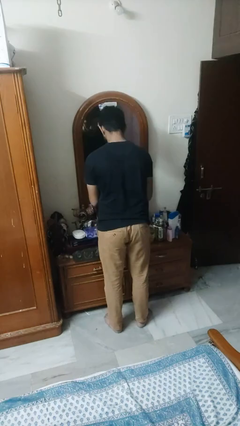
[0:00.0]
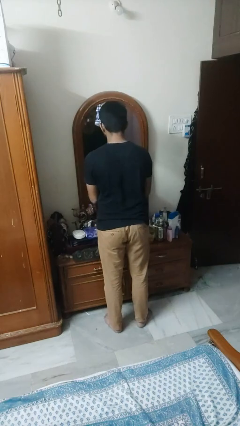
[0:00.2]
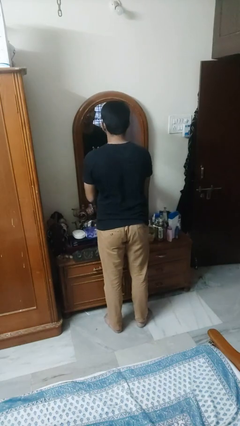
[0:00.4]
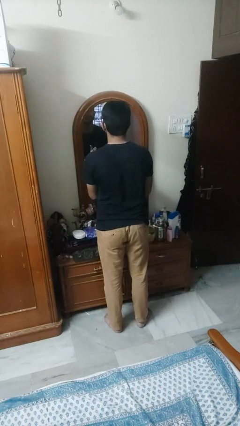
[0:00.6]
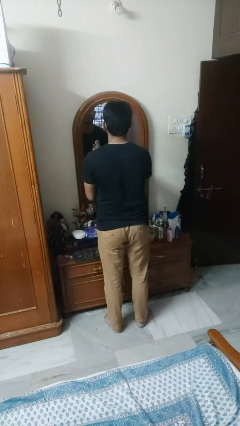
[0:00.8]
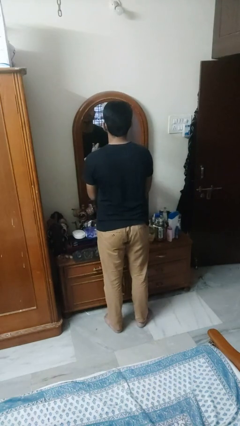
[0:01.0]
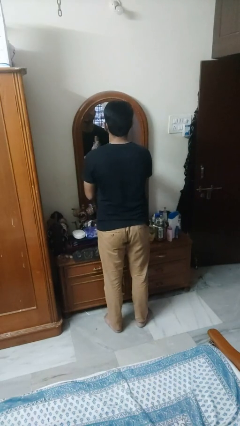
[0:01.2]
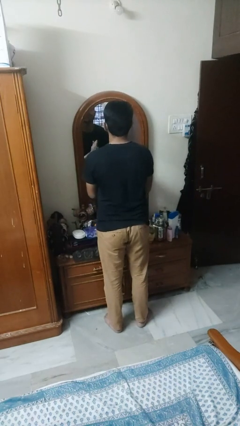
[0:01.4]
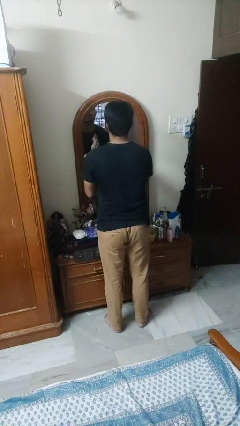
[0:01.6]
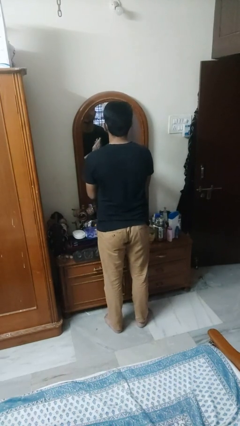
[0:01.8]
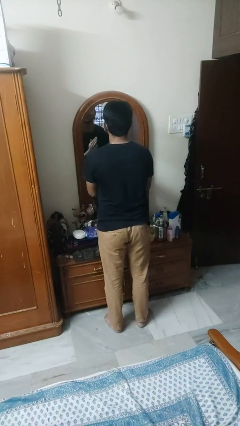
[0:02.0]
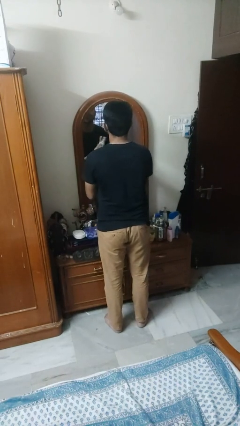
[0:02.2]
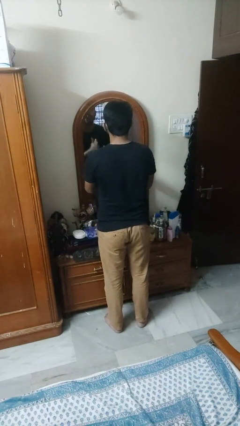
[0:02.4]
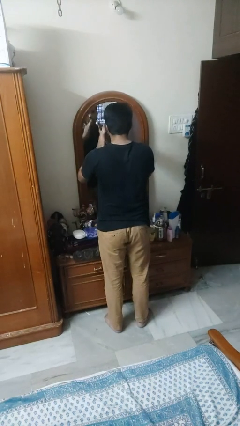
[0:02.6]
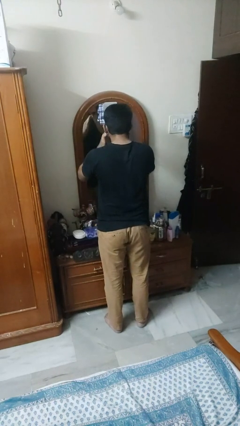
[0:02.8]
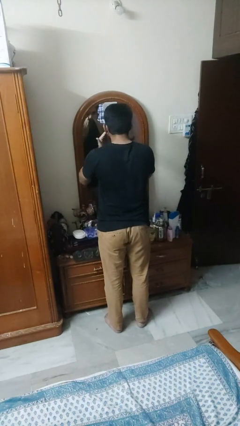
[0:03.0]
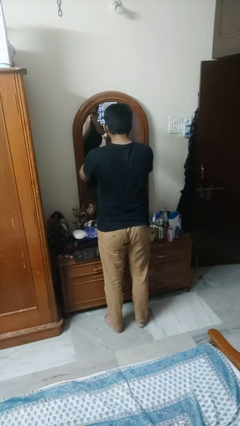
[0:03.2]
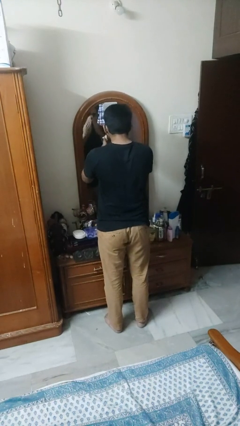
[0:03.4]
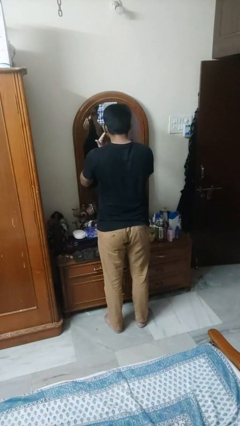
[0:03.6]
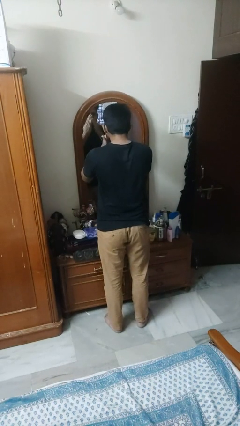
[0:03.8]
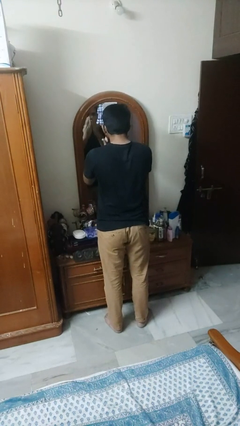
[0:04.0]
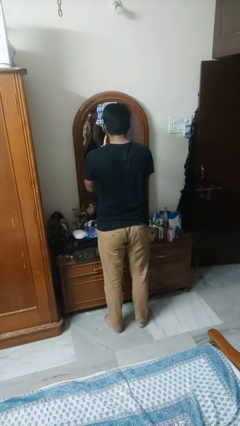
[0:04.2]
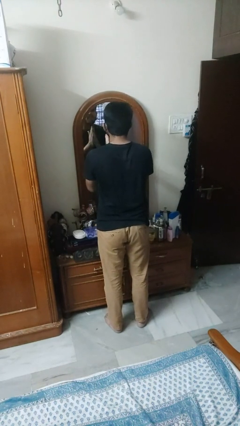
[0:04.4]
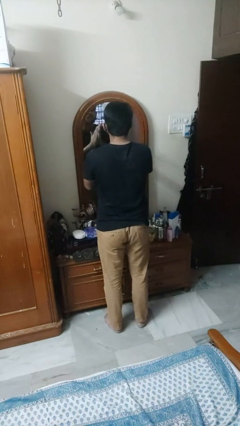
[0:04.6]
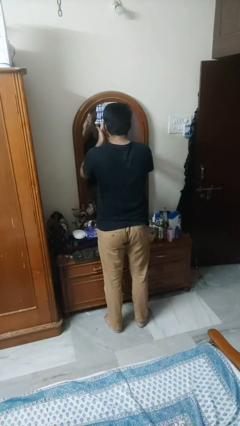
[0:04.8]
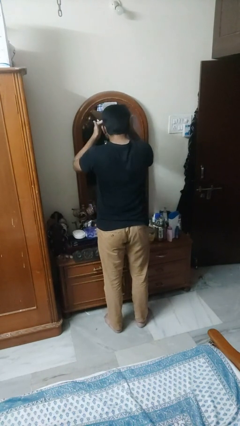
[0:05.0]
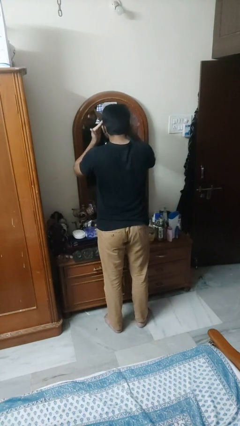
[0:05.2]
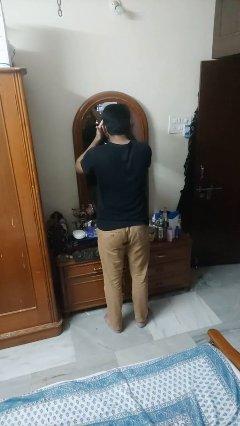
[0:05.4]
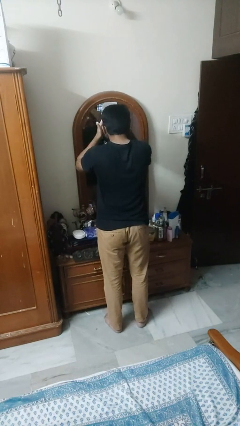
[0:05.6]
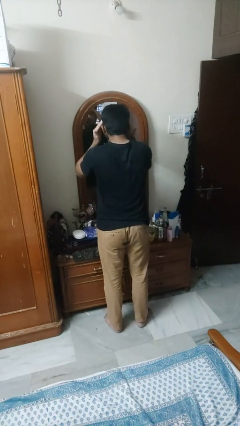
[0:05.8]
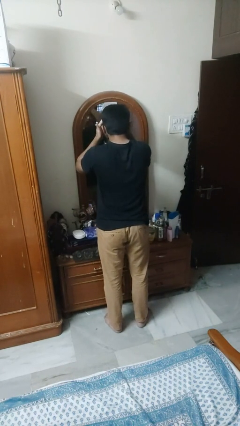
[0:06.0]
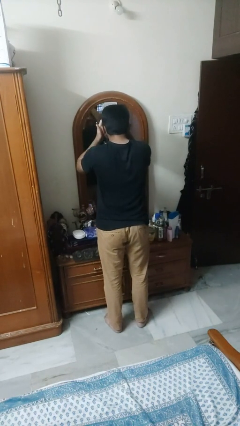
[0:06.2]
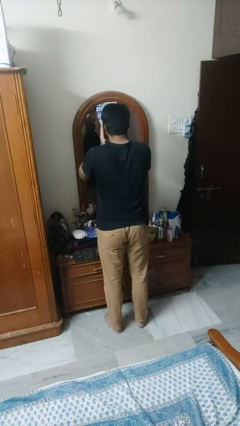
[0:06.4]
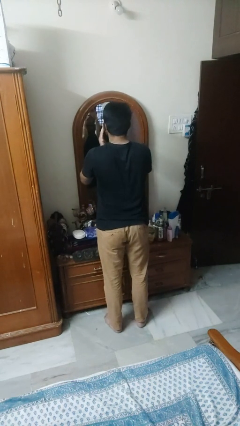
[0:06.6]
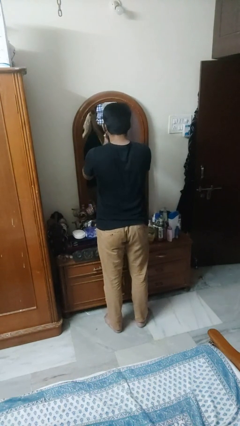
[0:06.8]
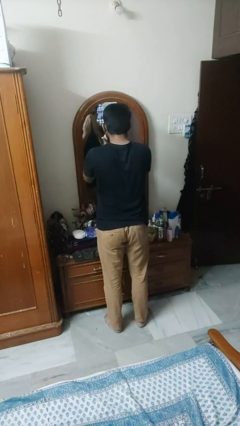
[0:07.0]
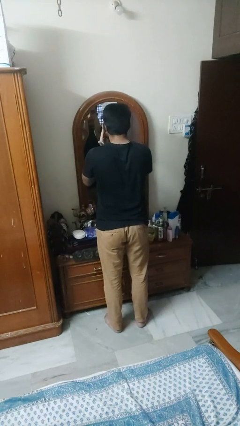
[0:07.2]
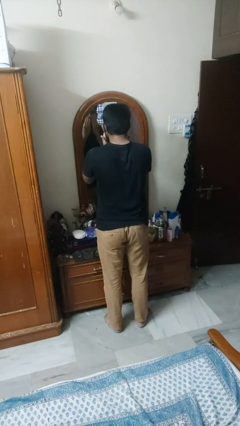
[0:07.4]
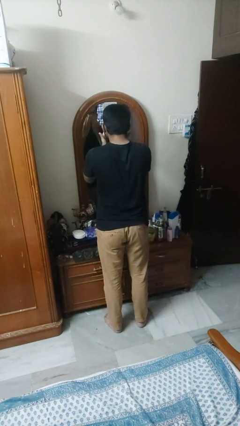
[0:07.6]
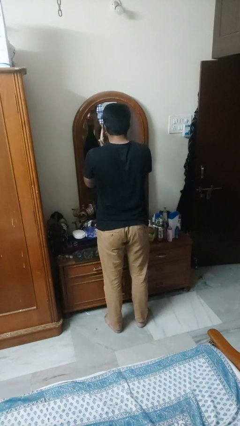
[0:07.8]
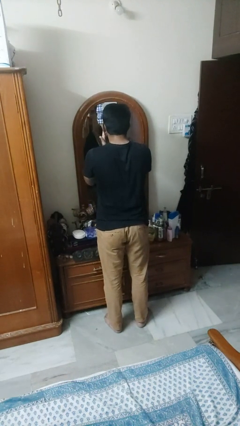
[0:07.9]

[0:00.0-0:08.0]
person applies sunscreen

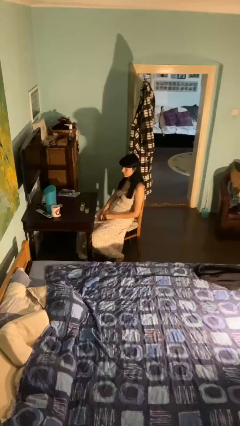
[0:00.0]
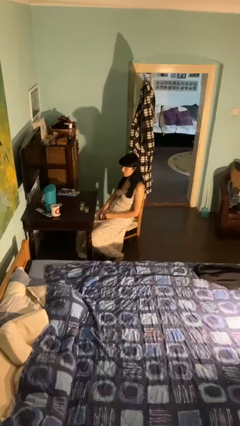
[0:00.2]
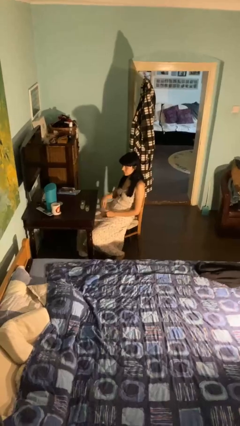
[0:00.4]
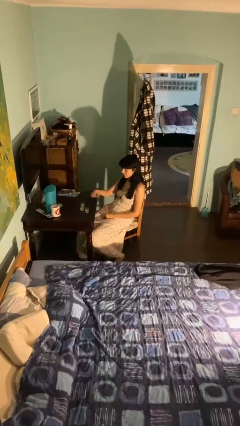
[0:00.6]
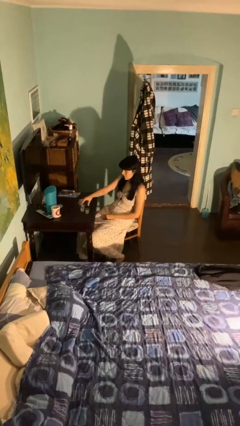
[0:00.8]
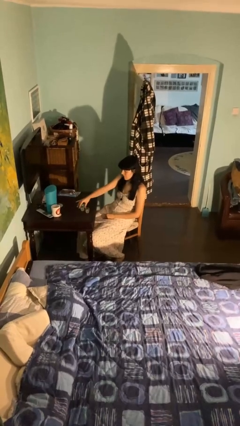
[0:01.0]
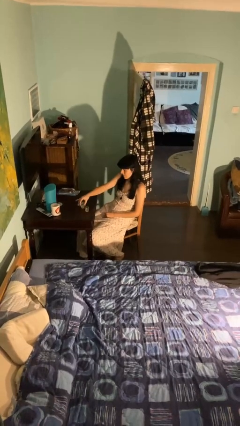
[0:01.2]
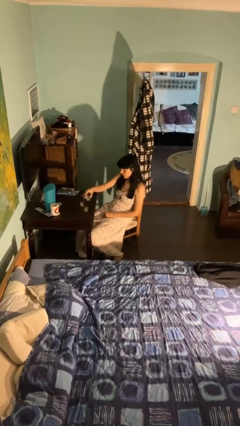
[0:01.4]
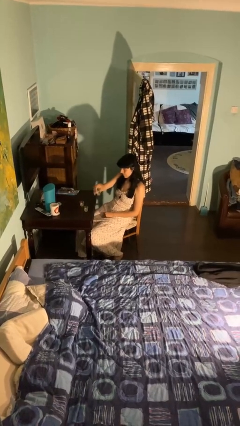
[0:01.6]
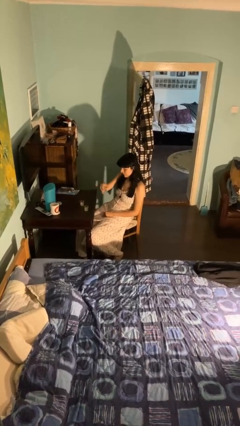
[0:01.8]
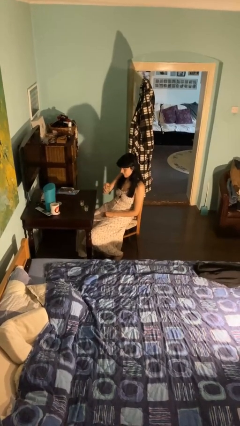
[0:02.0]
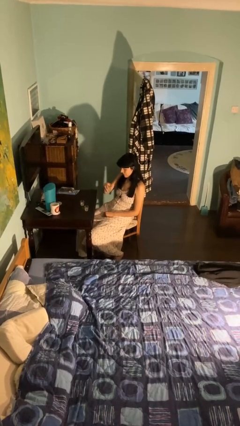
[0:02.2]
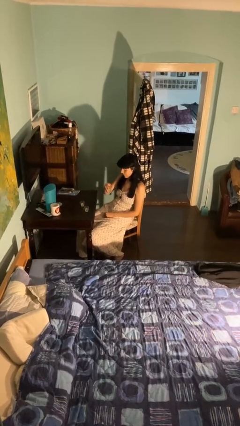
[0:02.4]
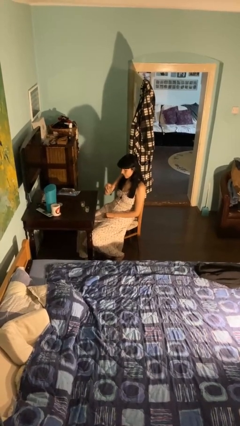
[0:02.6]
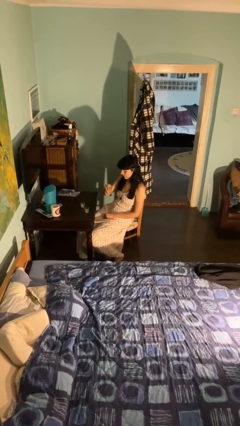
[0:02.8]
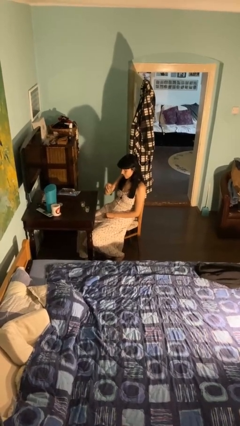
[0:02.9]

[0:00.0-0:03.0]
person picks up object from table

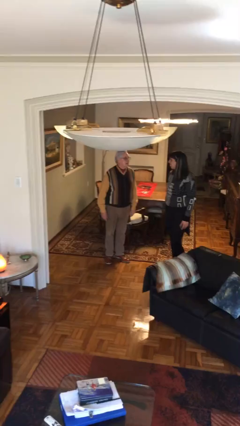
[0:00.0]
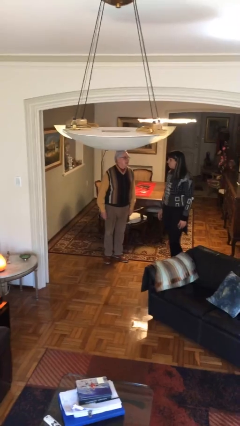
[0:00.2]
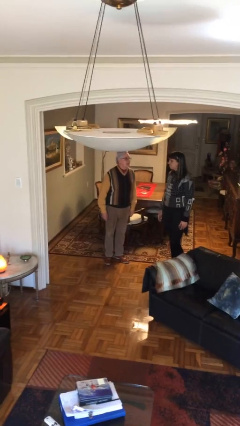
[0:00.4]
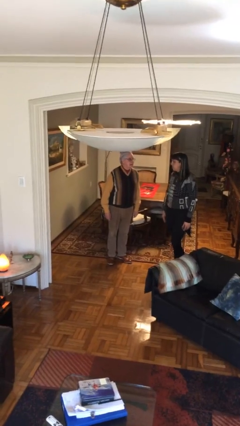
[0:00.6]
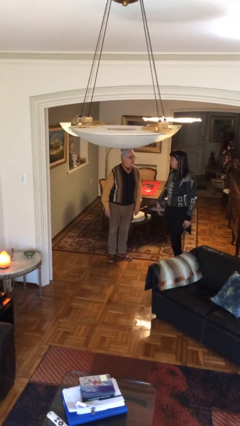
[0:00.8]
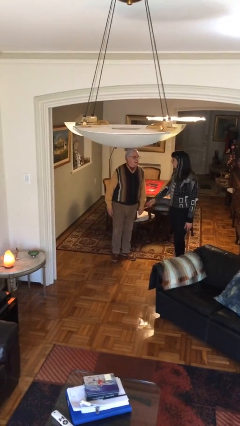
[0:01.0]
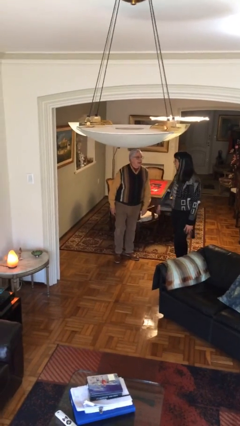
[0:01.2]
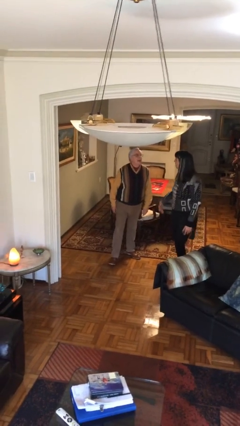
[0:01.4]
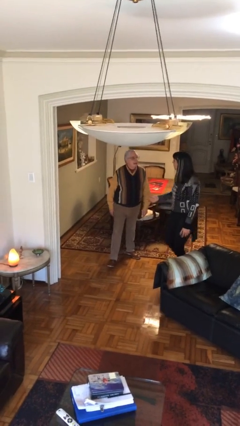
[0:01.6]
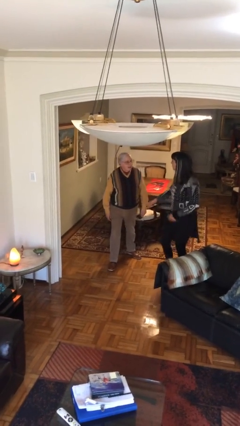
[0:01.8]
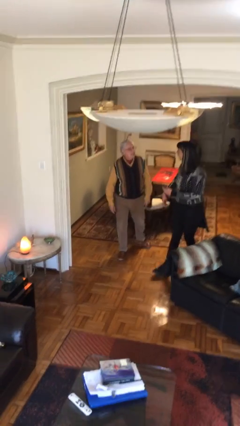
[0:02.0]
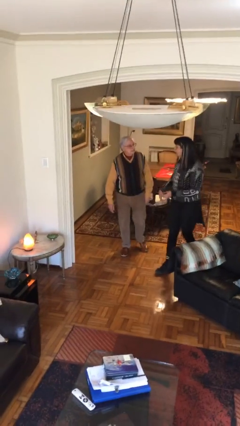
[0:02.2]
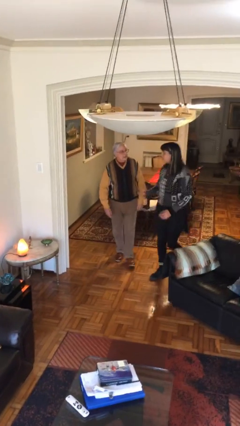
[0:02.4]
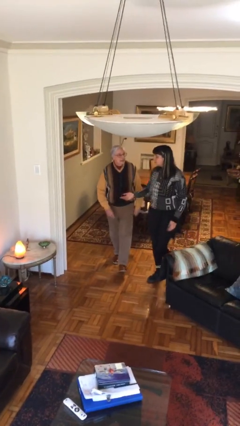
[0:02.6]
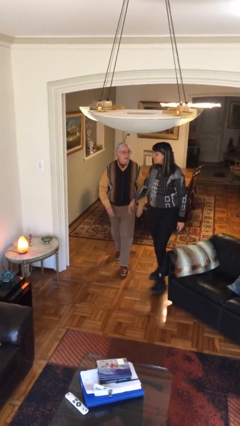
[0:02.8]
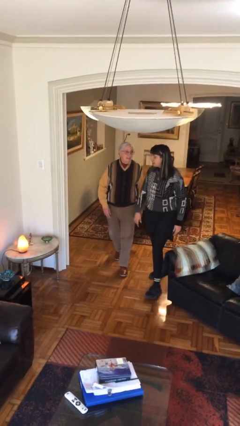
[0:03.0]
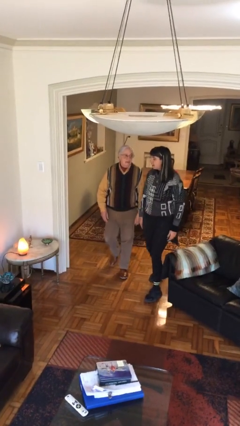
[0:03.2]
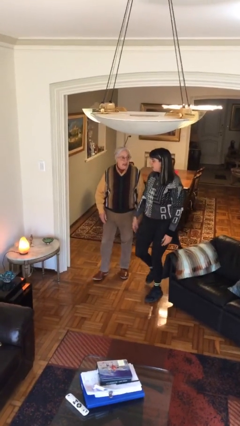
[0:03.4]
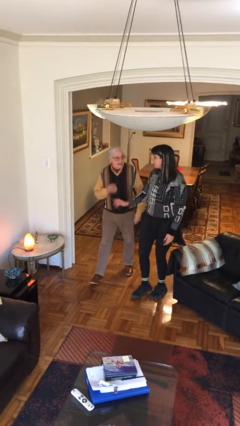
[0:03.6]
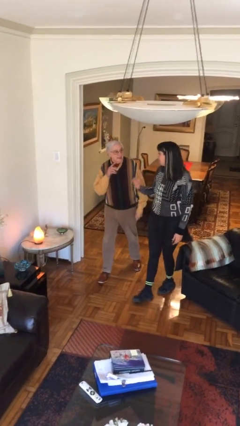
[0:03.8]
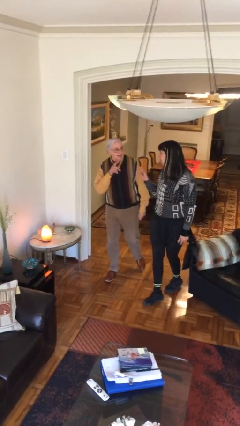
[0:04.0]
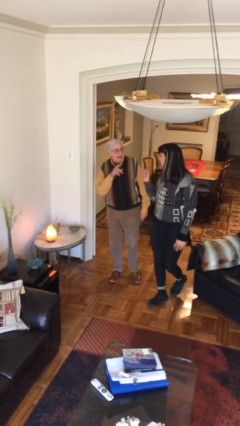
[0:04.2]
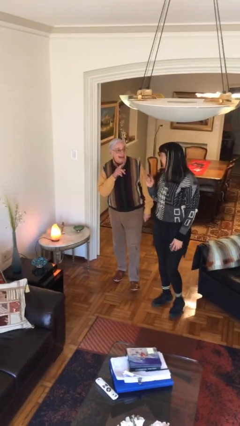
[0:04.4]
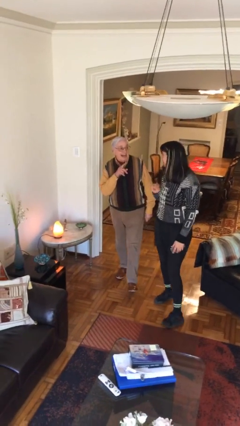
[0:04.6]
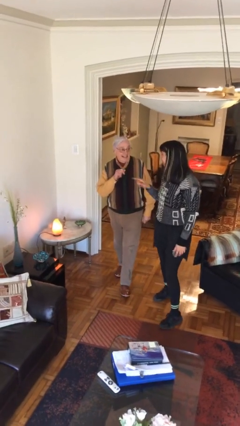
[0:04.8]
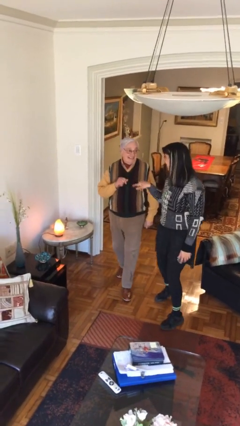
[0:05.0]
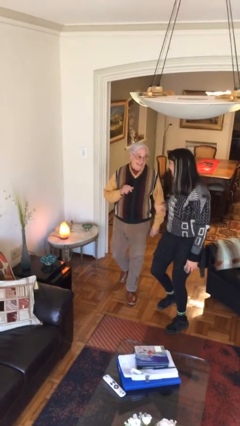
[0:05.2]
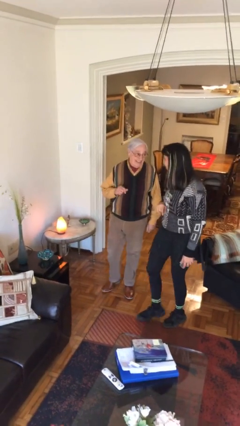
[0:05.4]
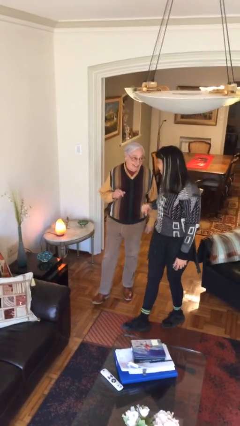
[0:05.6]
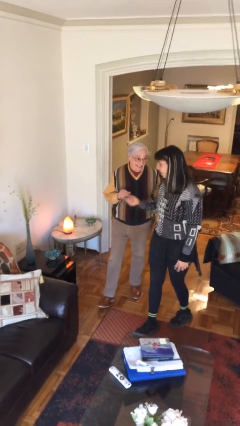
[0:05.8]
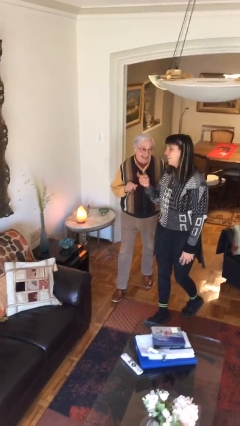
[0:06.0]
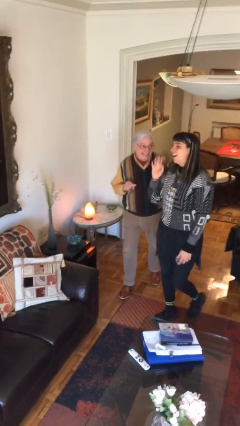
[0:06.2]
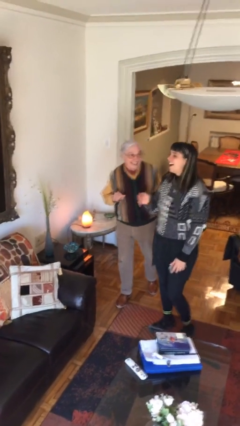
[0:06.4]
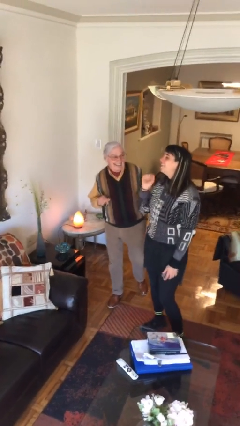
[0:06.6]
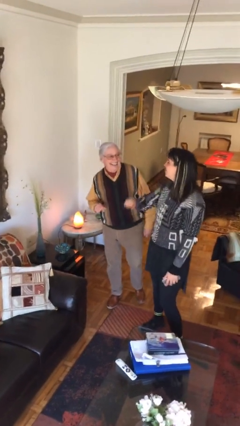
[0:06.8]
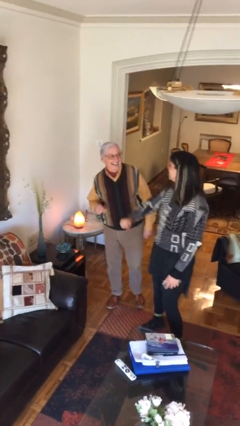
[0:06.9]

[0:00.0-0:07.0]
person talks to person
